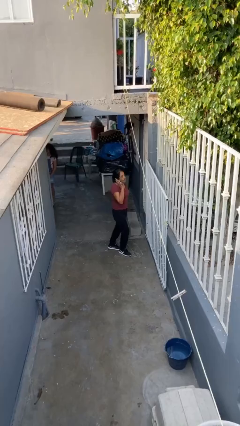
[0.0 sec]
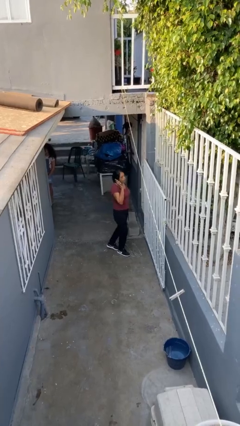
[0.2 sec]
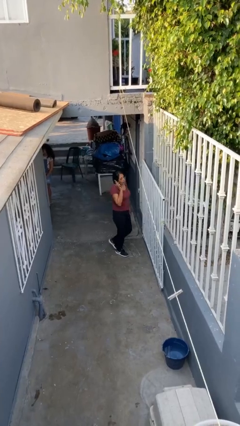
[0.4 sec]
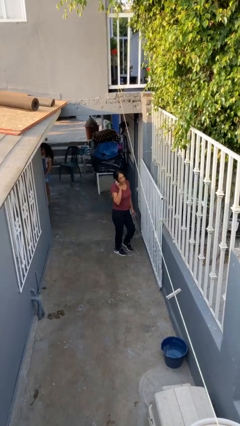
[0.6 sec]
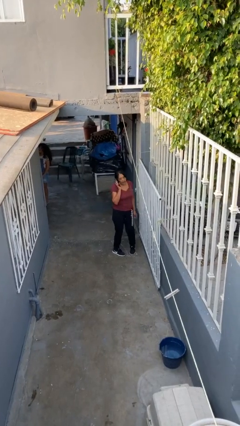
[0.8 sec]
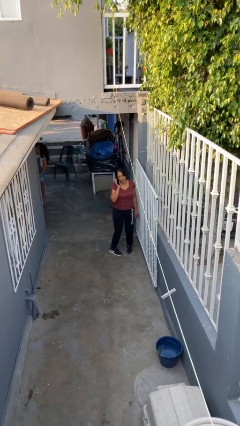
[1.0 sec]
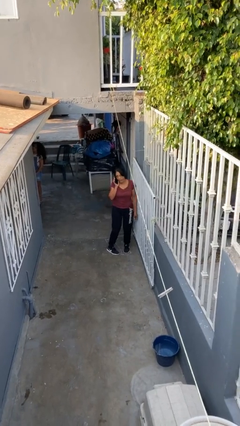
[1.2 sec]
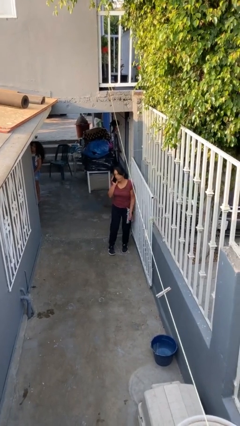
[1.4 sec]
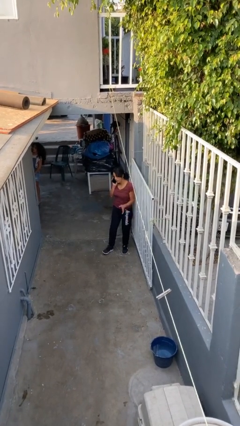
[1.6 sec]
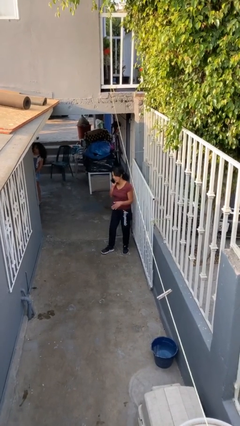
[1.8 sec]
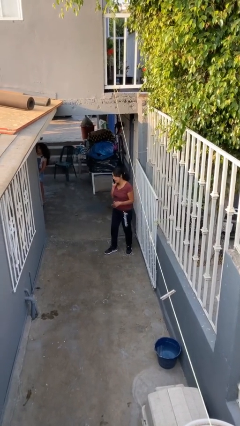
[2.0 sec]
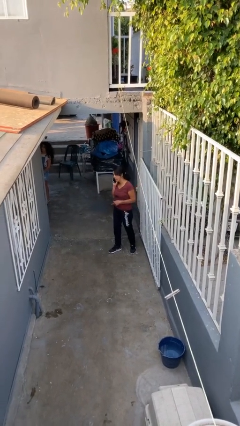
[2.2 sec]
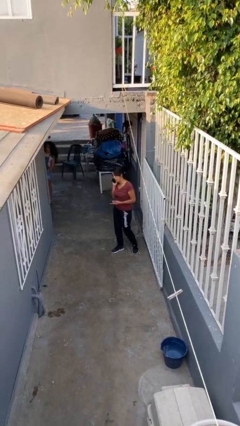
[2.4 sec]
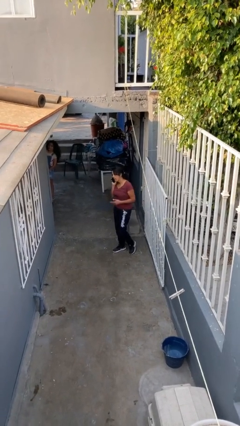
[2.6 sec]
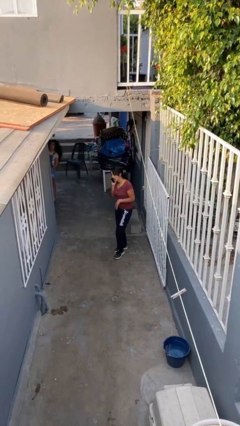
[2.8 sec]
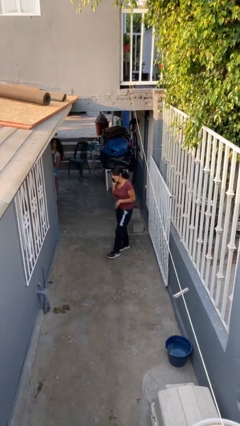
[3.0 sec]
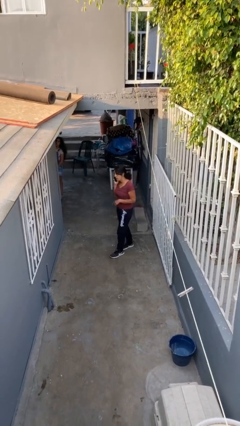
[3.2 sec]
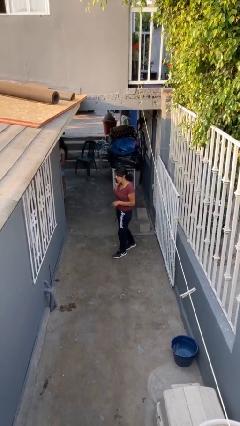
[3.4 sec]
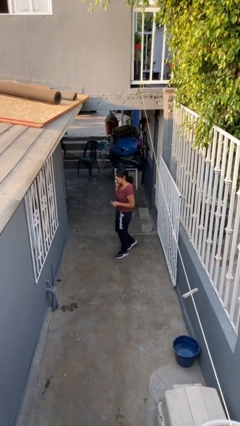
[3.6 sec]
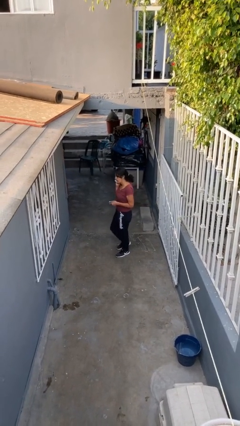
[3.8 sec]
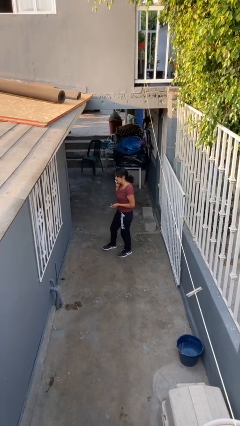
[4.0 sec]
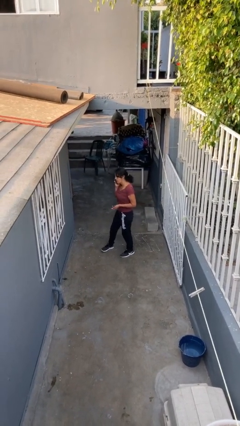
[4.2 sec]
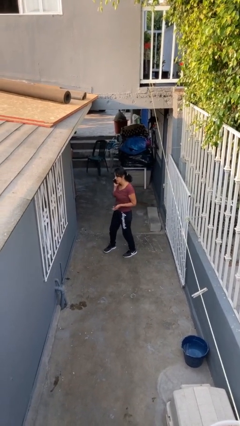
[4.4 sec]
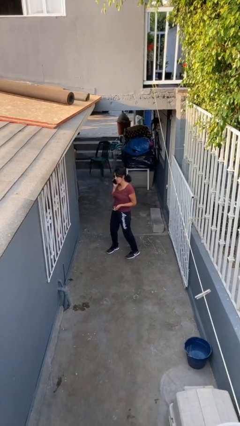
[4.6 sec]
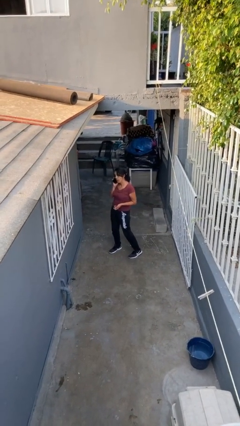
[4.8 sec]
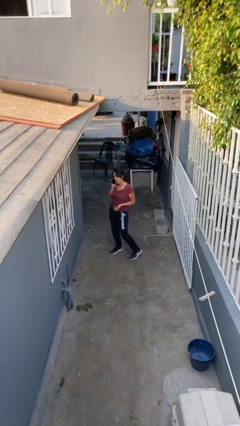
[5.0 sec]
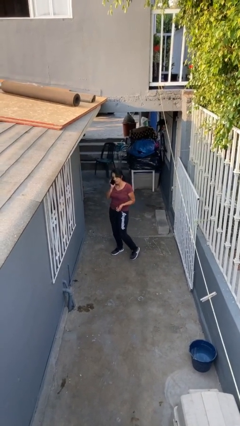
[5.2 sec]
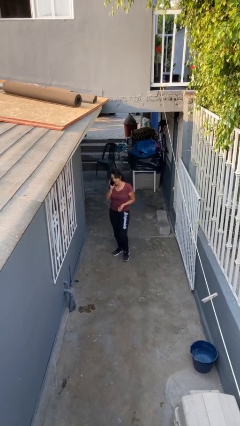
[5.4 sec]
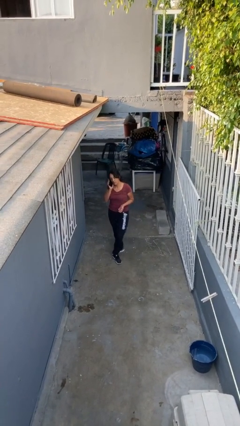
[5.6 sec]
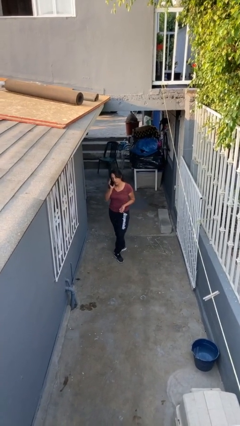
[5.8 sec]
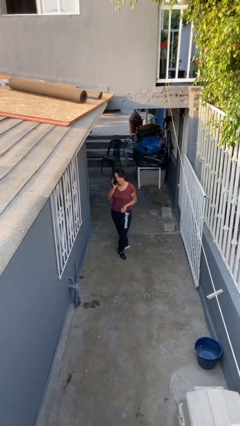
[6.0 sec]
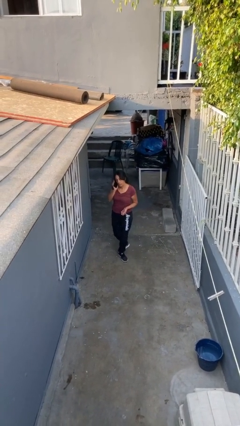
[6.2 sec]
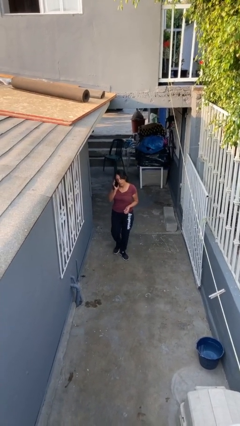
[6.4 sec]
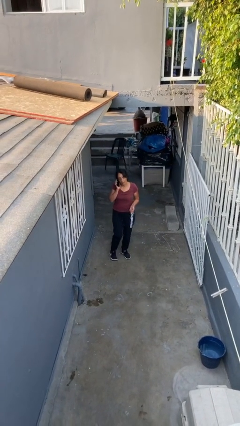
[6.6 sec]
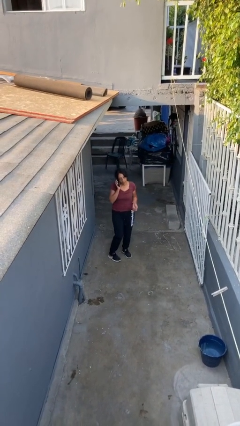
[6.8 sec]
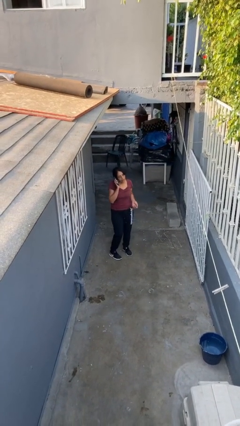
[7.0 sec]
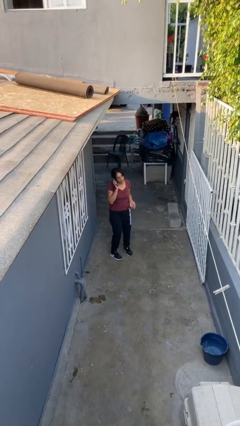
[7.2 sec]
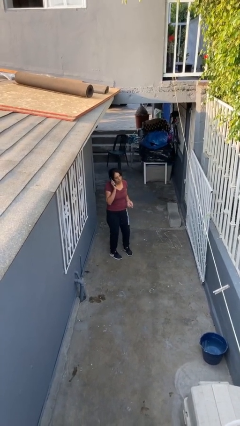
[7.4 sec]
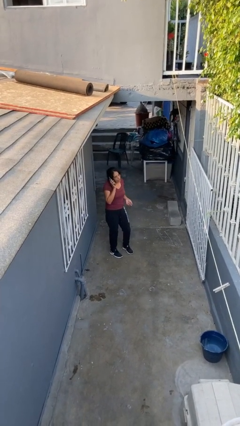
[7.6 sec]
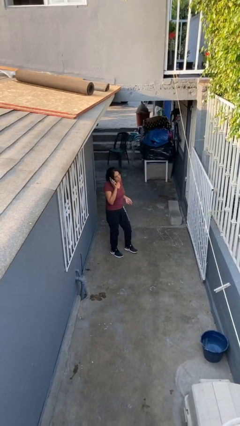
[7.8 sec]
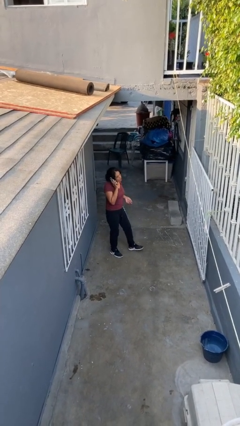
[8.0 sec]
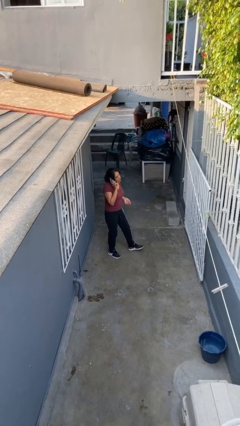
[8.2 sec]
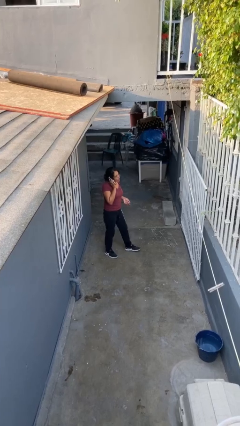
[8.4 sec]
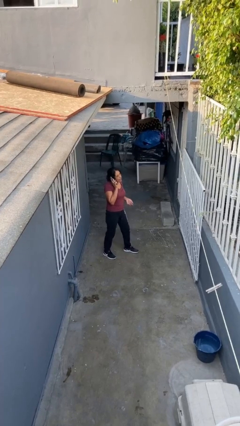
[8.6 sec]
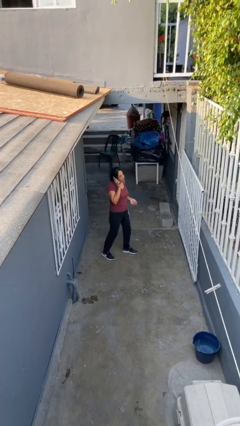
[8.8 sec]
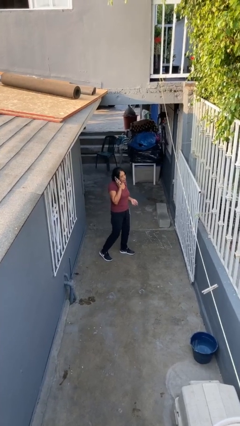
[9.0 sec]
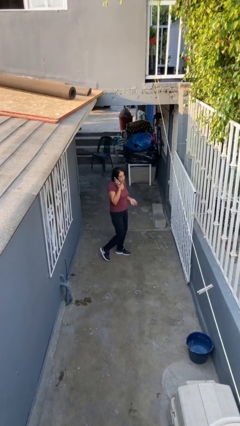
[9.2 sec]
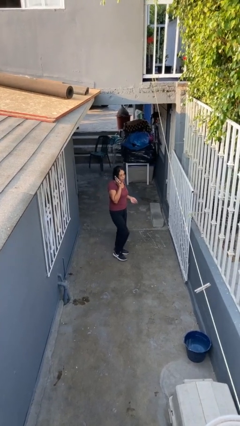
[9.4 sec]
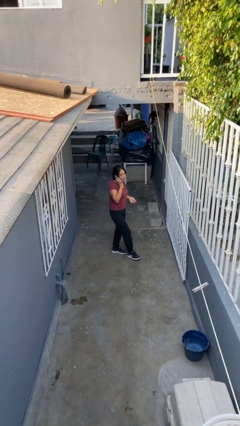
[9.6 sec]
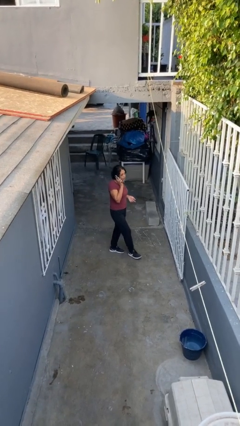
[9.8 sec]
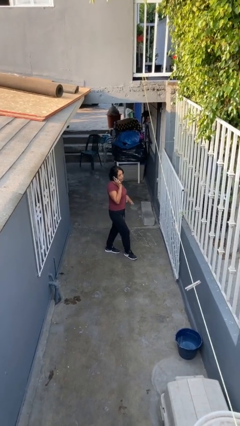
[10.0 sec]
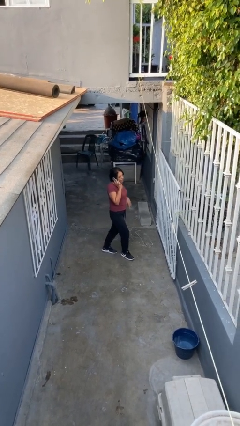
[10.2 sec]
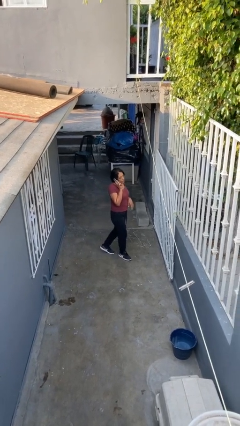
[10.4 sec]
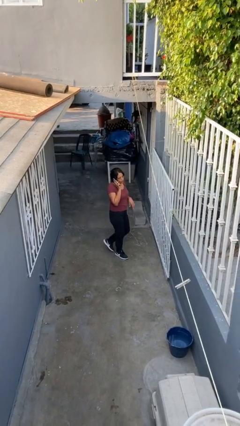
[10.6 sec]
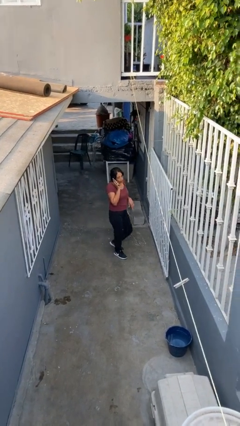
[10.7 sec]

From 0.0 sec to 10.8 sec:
person talks on phone

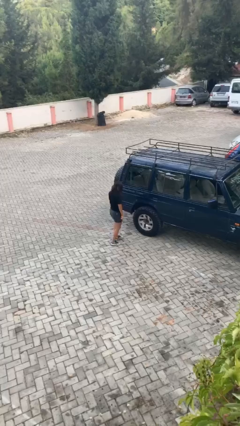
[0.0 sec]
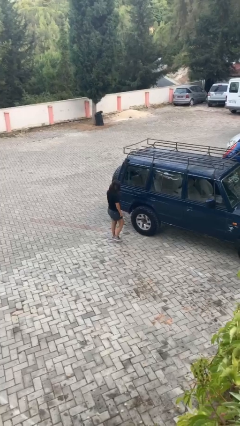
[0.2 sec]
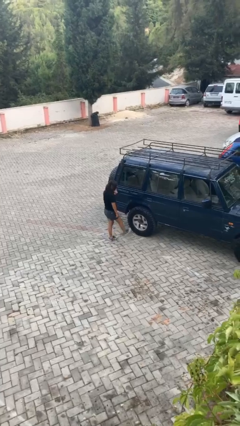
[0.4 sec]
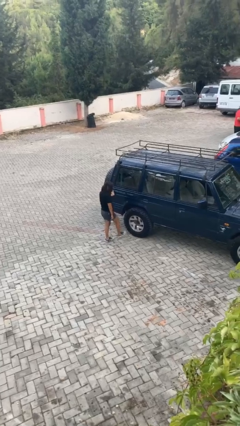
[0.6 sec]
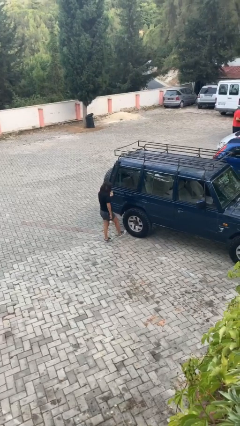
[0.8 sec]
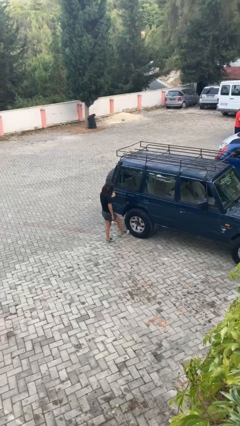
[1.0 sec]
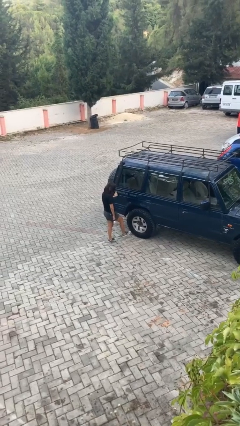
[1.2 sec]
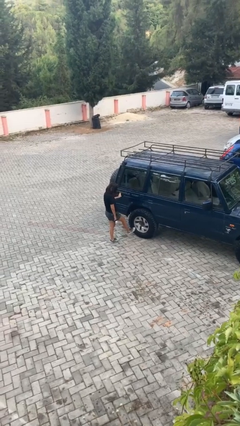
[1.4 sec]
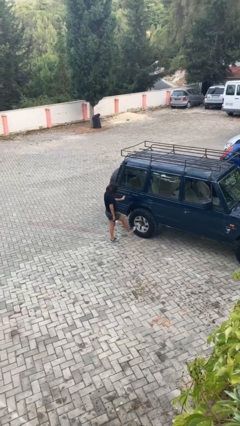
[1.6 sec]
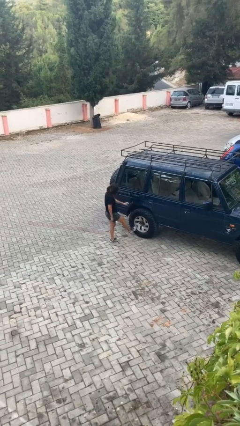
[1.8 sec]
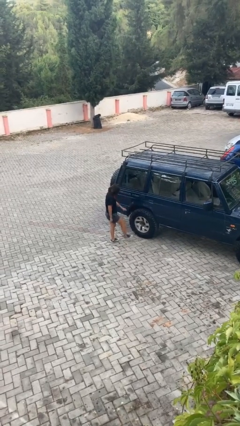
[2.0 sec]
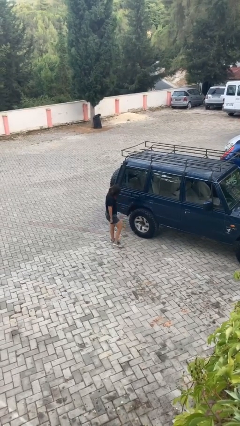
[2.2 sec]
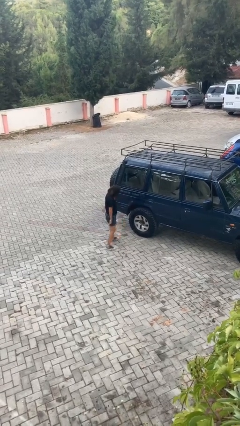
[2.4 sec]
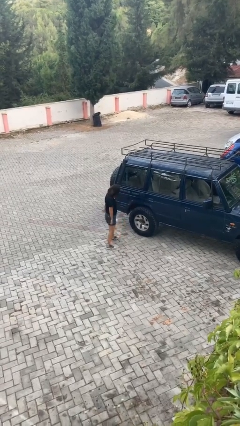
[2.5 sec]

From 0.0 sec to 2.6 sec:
person kicks car tires

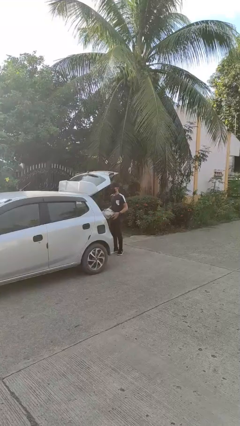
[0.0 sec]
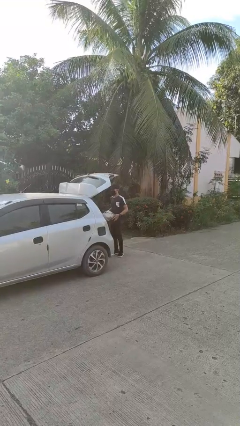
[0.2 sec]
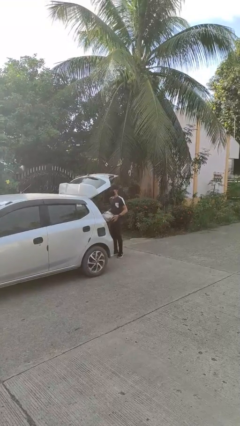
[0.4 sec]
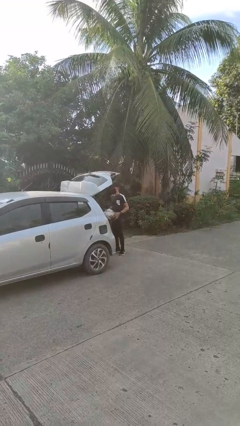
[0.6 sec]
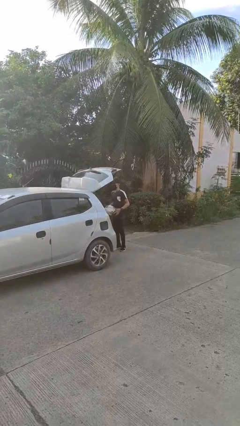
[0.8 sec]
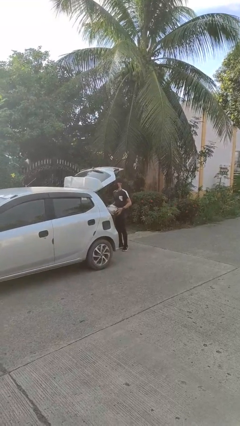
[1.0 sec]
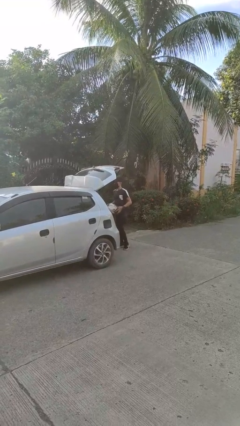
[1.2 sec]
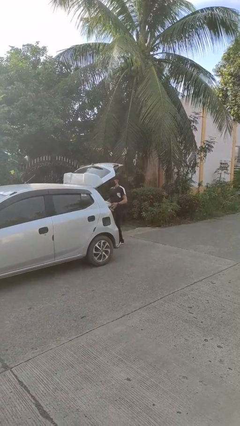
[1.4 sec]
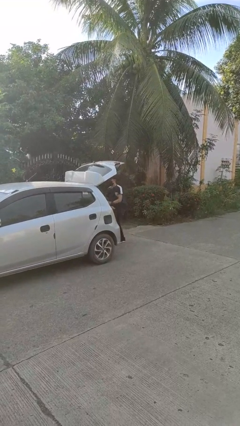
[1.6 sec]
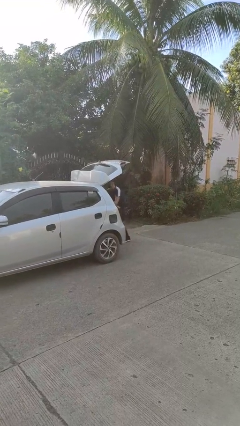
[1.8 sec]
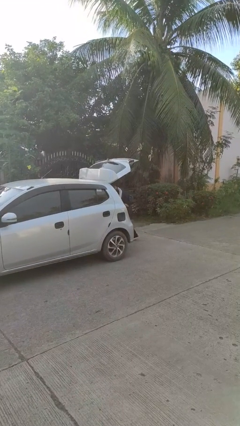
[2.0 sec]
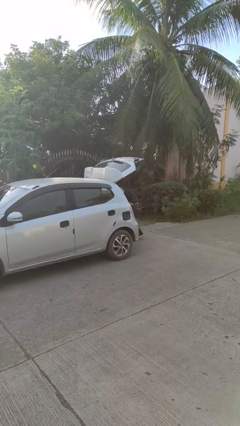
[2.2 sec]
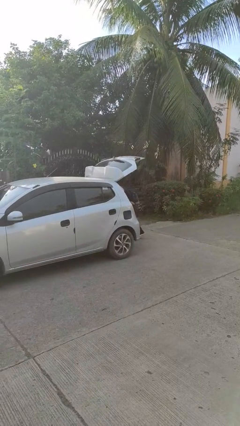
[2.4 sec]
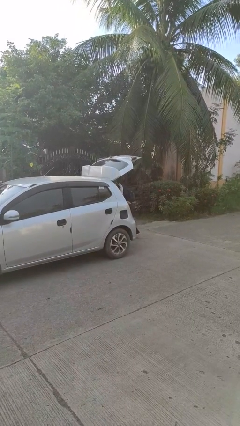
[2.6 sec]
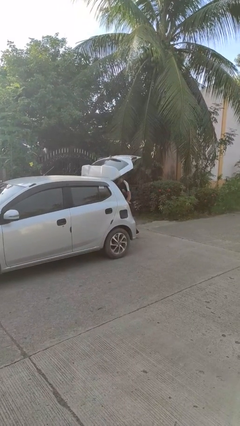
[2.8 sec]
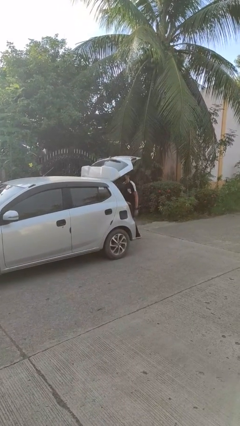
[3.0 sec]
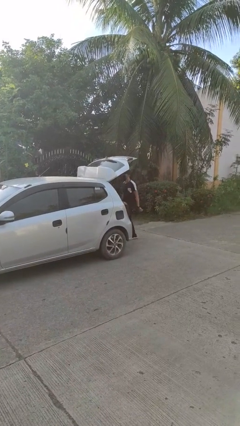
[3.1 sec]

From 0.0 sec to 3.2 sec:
person loads car

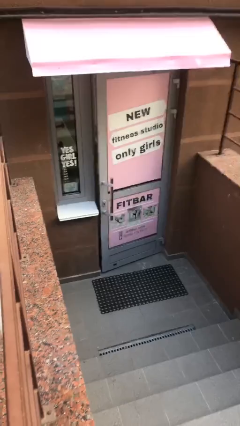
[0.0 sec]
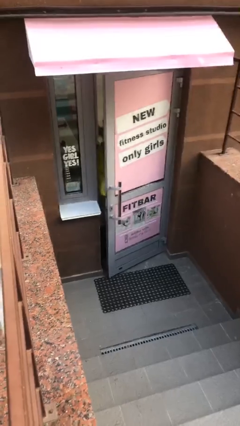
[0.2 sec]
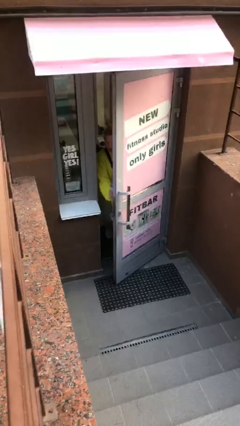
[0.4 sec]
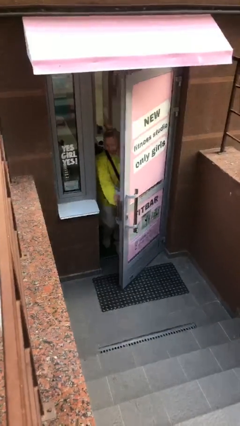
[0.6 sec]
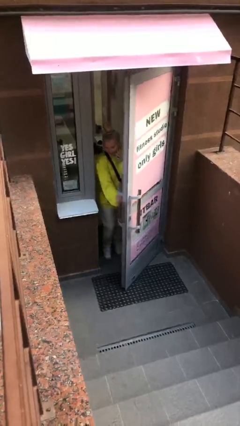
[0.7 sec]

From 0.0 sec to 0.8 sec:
person opens facility door
